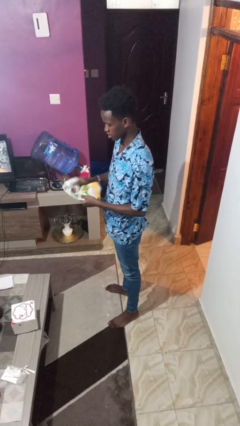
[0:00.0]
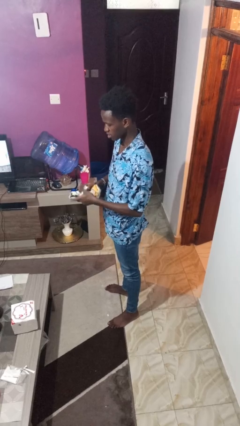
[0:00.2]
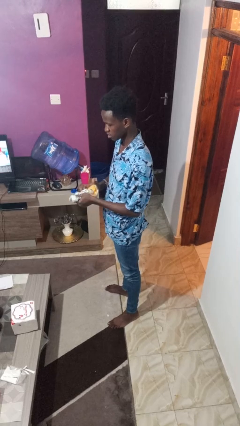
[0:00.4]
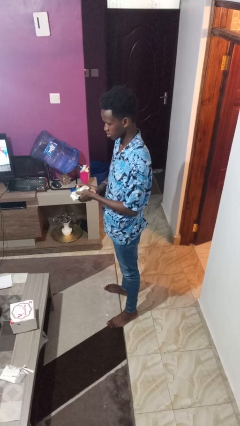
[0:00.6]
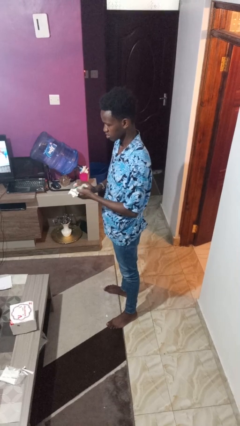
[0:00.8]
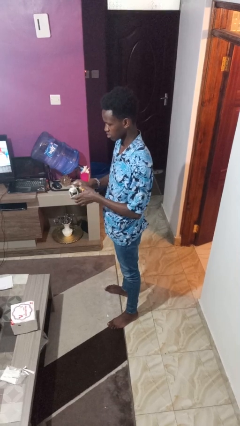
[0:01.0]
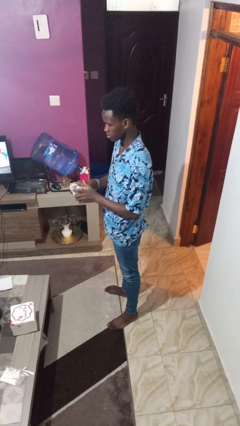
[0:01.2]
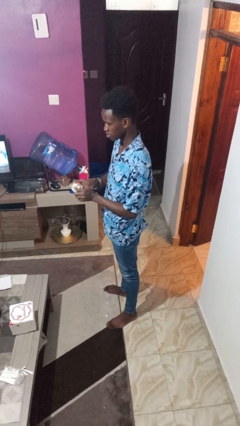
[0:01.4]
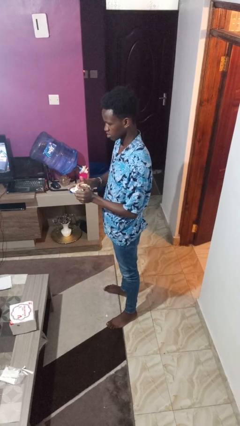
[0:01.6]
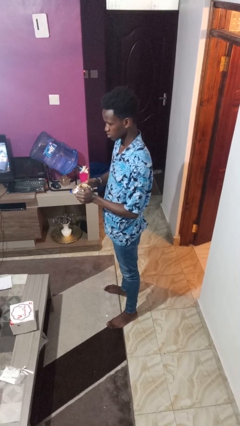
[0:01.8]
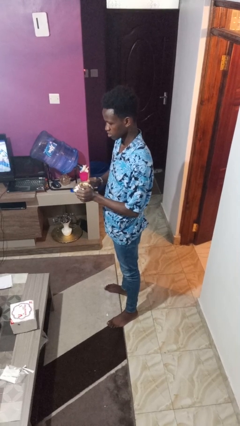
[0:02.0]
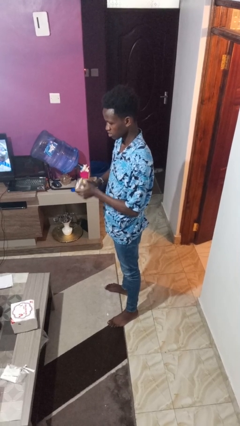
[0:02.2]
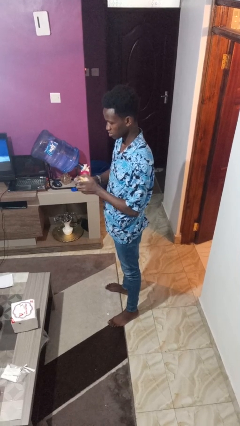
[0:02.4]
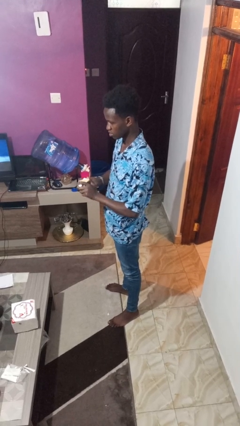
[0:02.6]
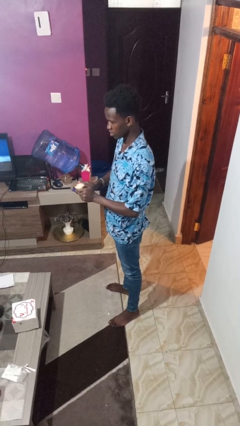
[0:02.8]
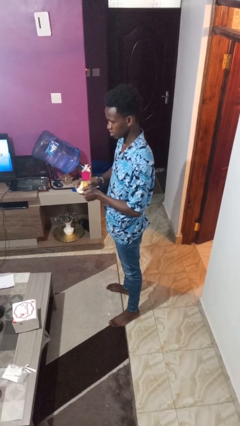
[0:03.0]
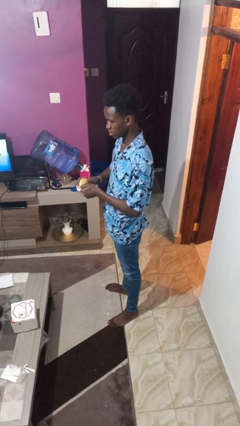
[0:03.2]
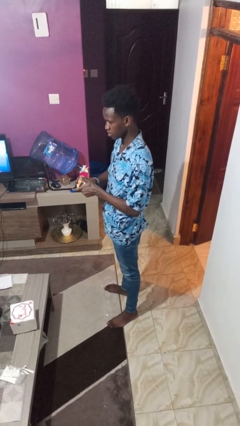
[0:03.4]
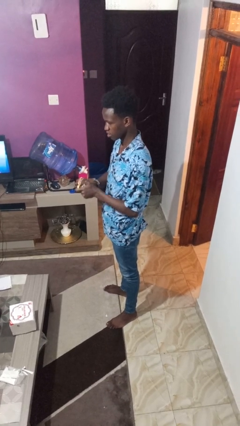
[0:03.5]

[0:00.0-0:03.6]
person crumples paper

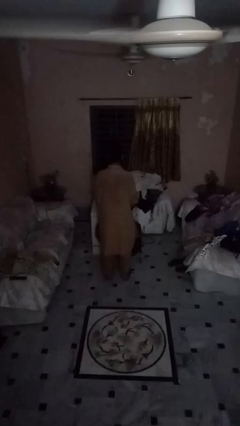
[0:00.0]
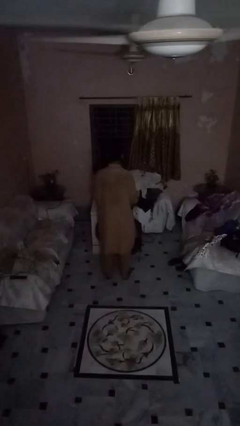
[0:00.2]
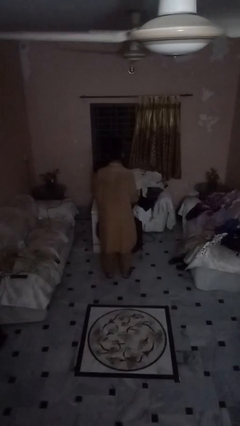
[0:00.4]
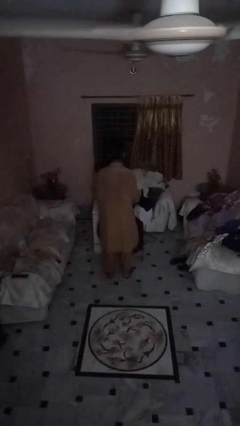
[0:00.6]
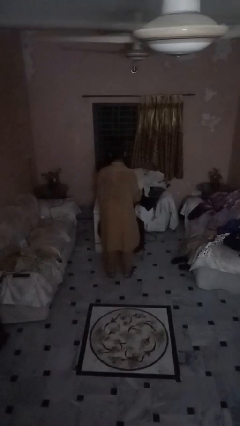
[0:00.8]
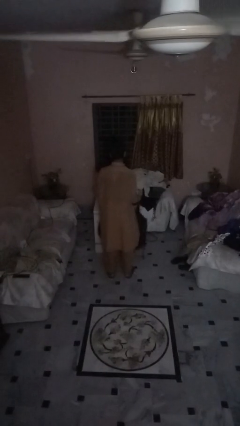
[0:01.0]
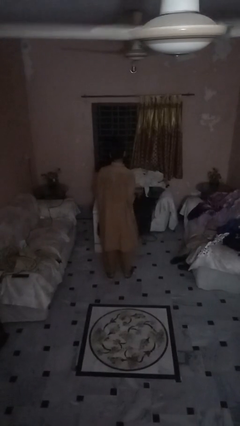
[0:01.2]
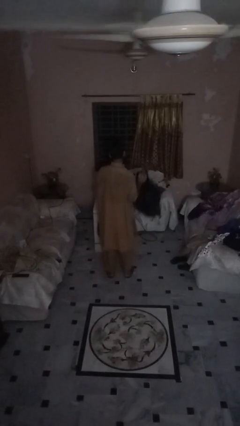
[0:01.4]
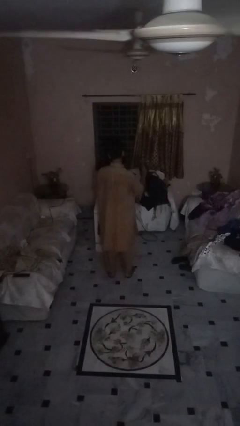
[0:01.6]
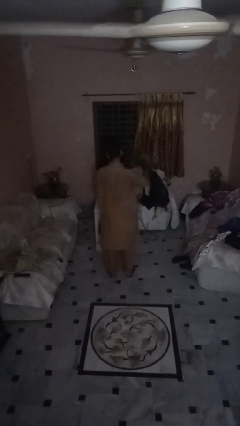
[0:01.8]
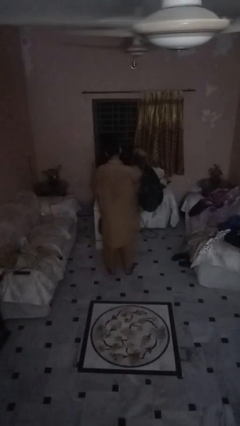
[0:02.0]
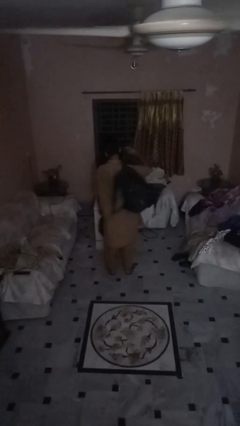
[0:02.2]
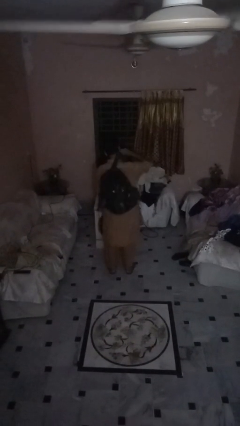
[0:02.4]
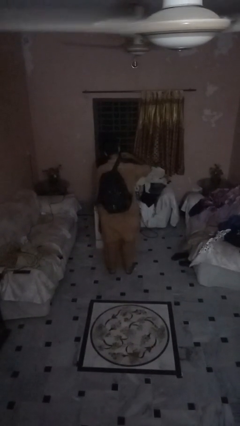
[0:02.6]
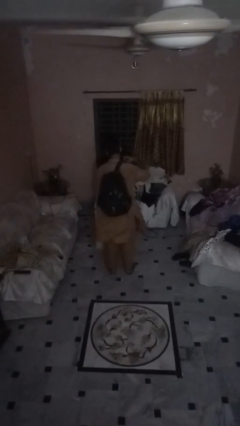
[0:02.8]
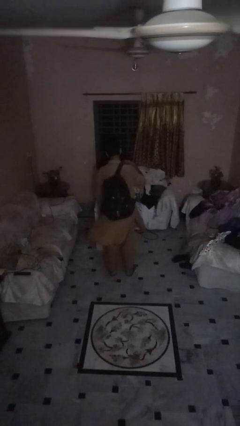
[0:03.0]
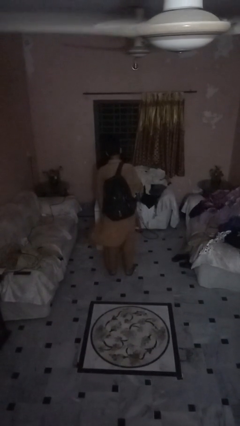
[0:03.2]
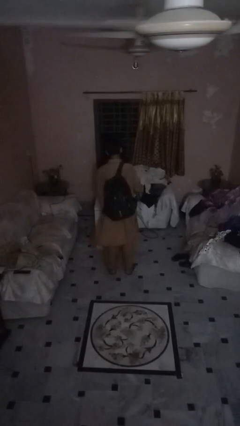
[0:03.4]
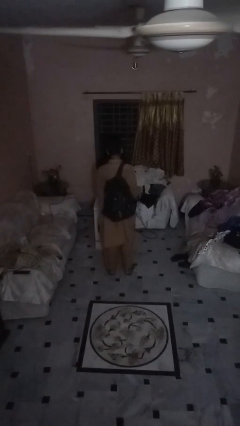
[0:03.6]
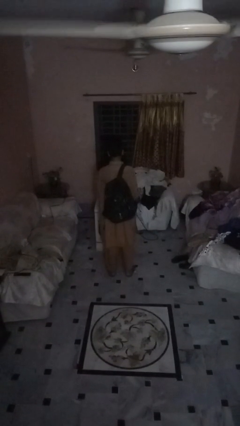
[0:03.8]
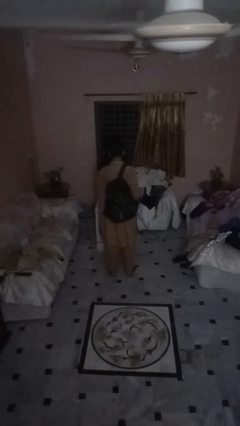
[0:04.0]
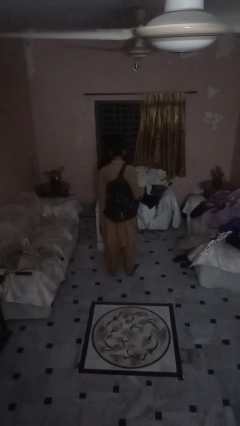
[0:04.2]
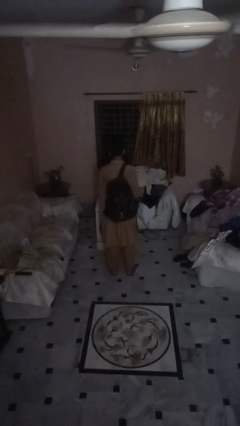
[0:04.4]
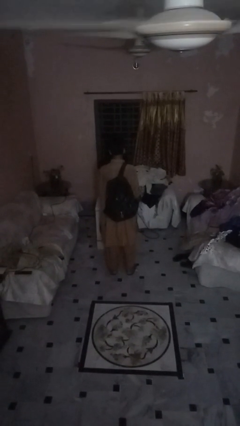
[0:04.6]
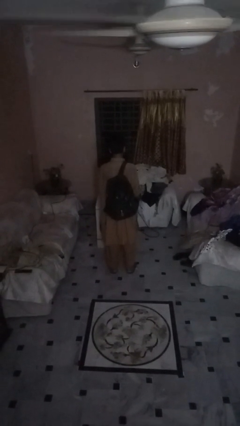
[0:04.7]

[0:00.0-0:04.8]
person puts on backpack

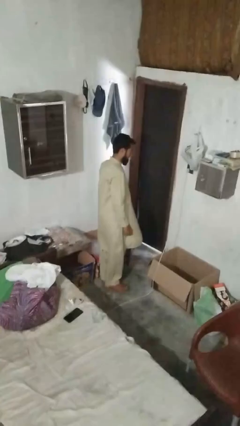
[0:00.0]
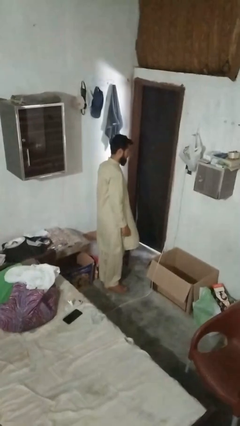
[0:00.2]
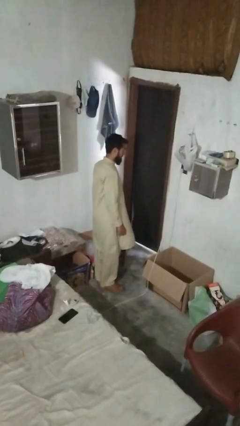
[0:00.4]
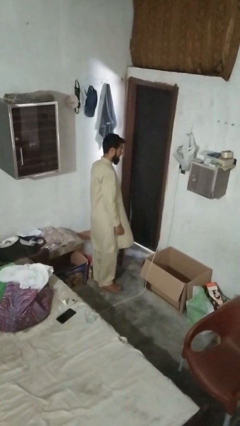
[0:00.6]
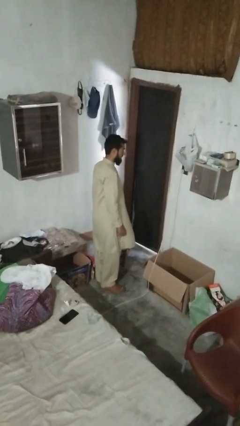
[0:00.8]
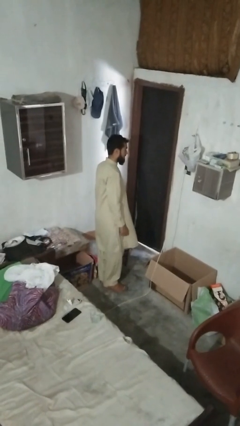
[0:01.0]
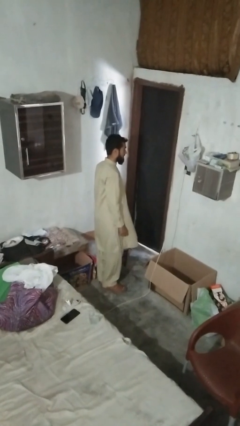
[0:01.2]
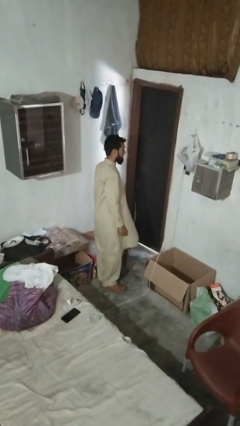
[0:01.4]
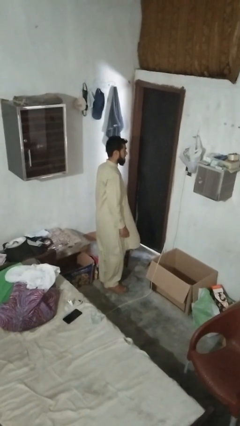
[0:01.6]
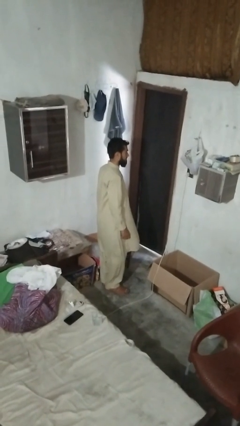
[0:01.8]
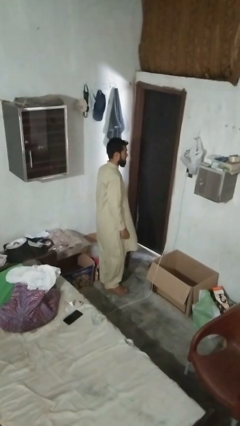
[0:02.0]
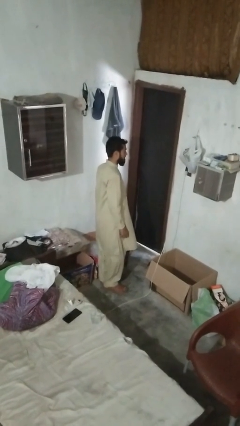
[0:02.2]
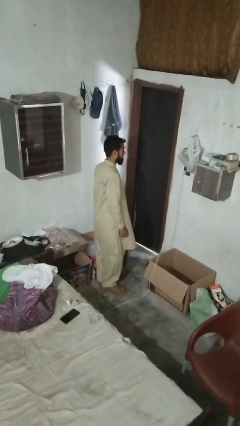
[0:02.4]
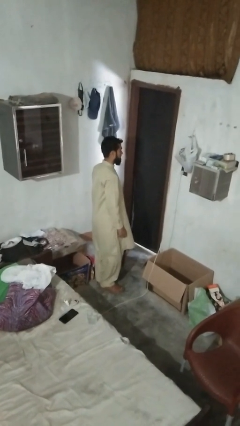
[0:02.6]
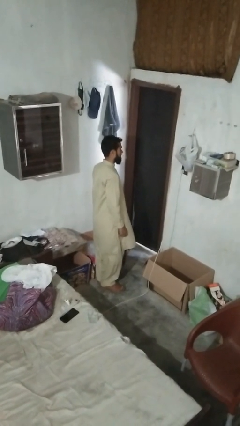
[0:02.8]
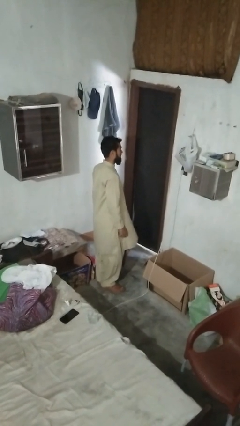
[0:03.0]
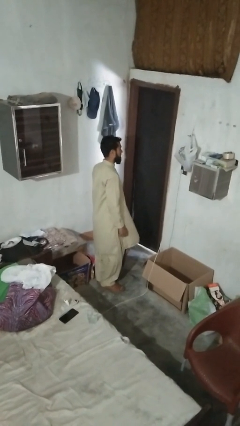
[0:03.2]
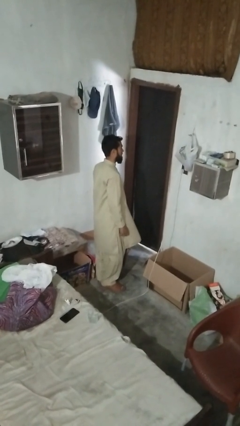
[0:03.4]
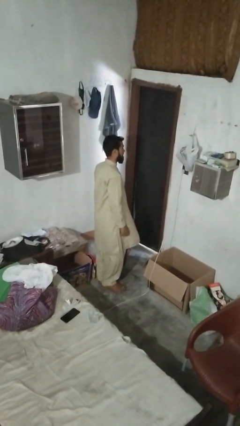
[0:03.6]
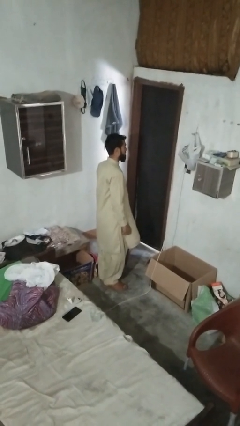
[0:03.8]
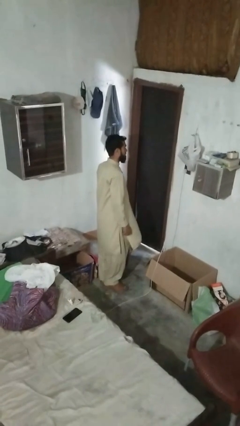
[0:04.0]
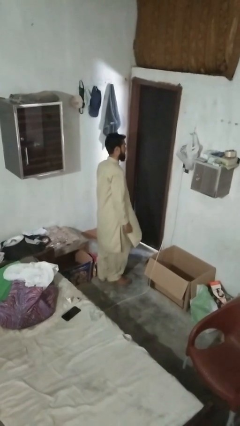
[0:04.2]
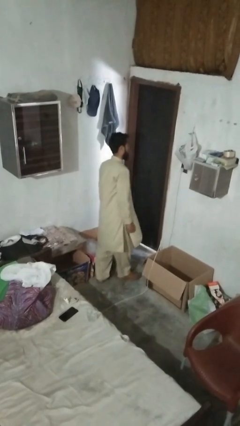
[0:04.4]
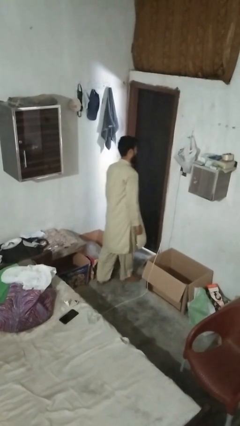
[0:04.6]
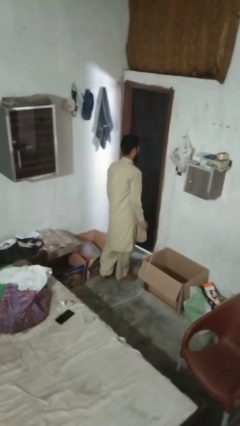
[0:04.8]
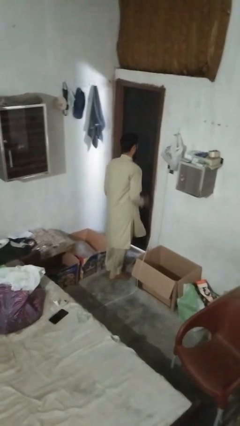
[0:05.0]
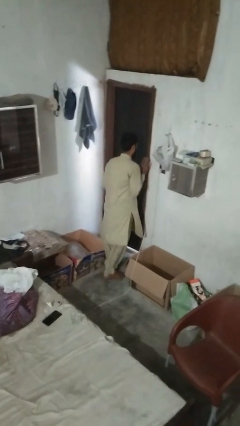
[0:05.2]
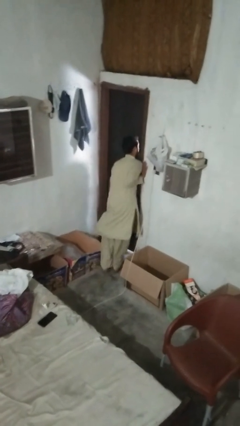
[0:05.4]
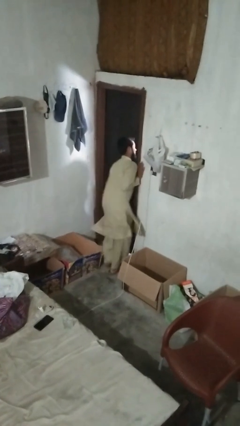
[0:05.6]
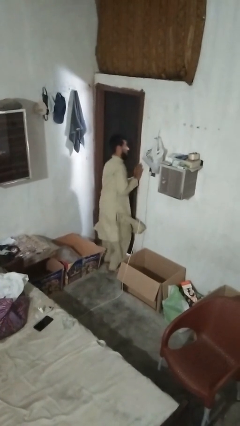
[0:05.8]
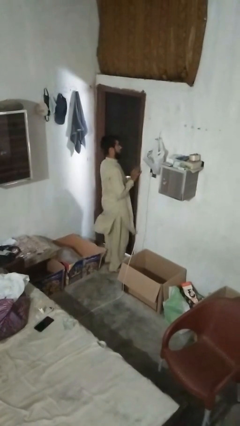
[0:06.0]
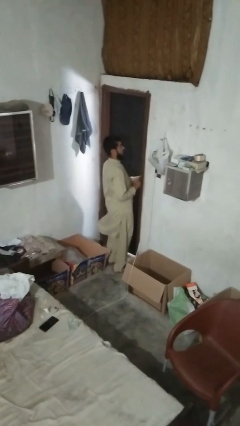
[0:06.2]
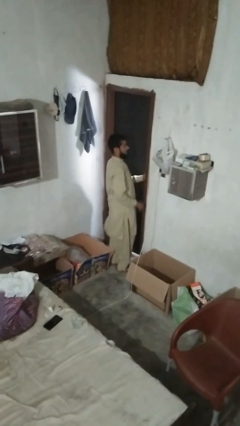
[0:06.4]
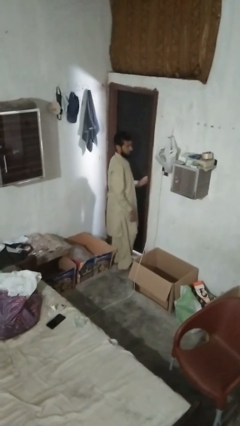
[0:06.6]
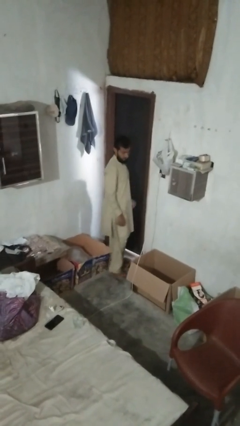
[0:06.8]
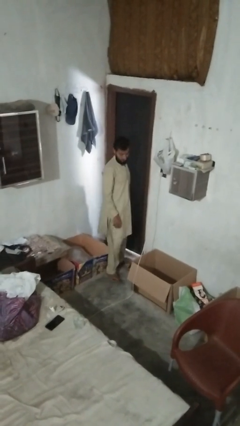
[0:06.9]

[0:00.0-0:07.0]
person bumps into wall

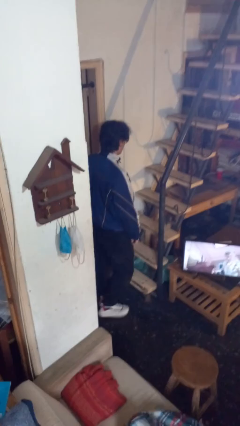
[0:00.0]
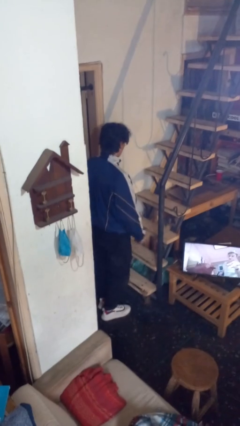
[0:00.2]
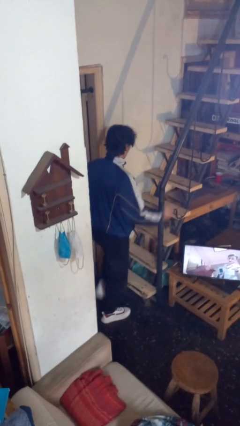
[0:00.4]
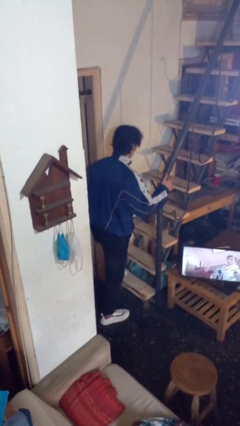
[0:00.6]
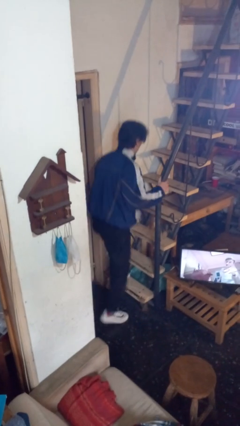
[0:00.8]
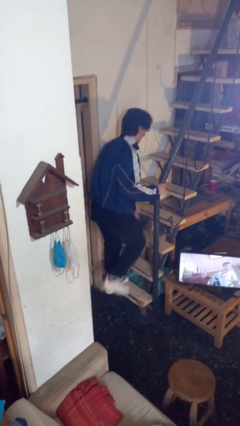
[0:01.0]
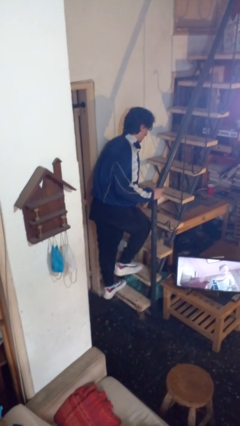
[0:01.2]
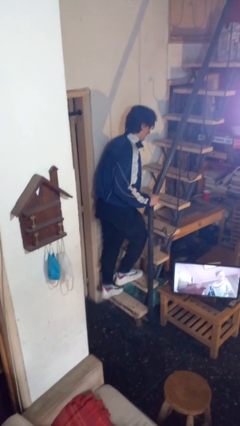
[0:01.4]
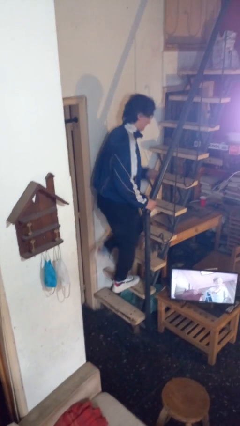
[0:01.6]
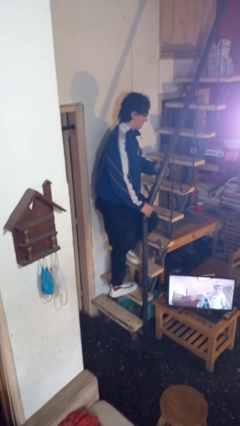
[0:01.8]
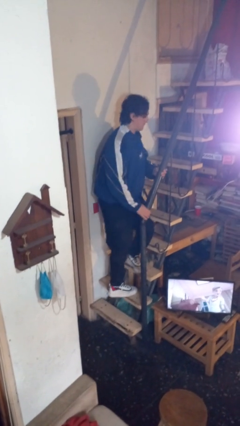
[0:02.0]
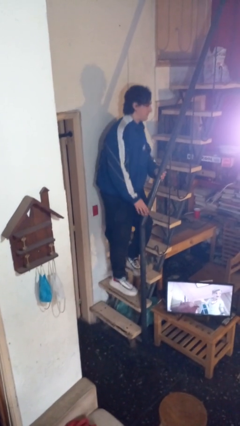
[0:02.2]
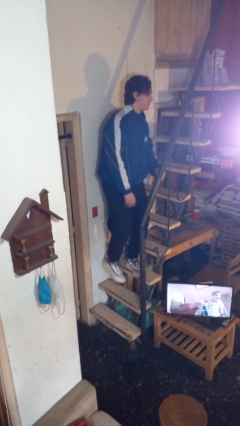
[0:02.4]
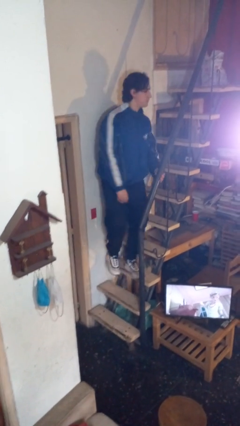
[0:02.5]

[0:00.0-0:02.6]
person climbs up stairs

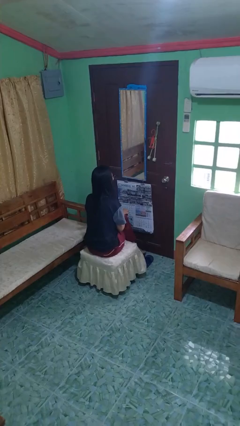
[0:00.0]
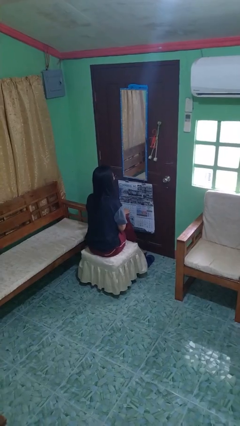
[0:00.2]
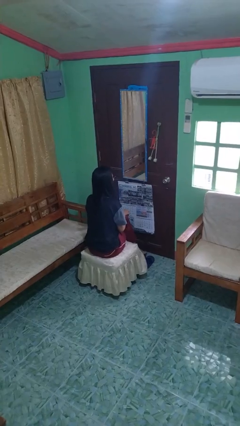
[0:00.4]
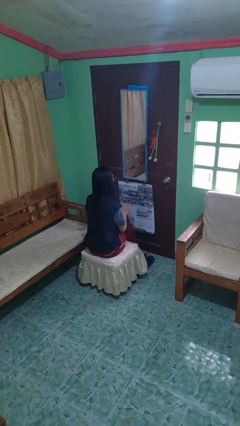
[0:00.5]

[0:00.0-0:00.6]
person gestures swipe right
